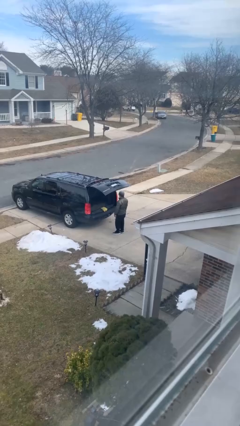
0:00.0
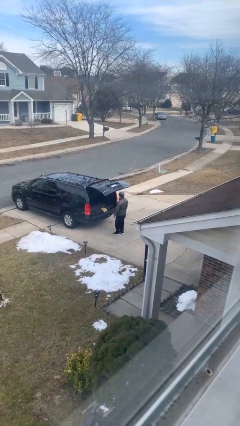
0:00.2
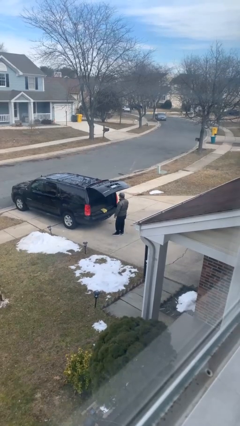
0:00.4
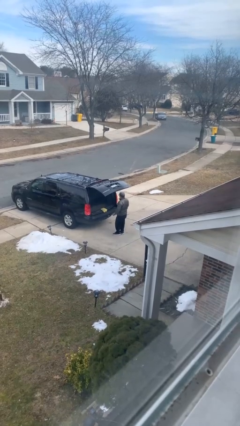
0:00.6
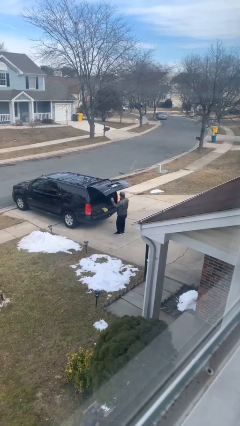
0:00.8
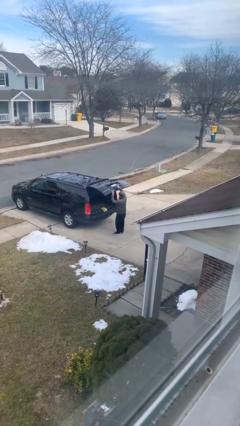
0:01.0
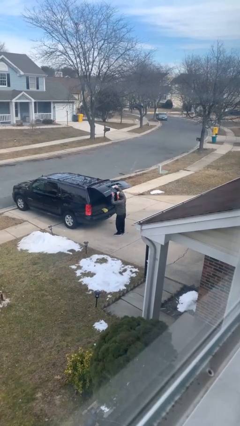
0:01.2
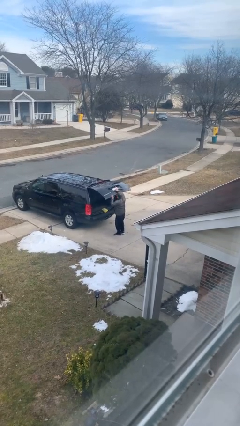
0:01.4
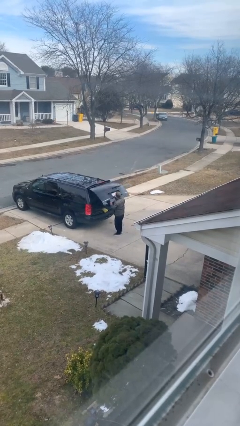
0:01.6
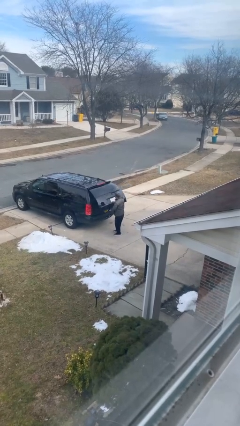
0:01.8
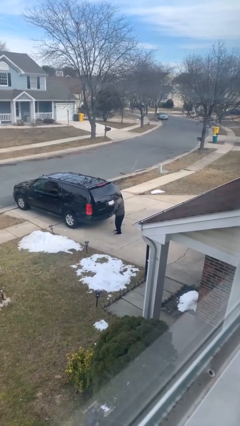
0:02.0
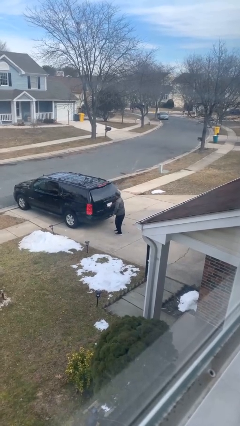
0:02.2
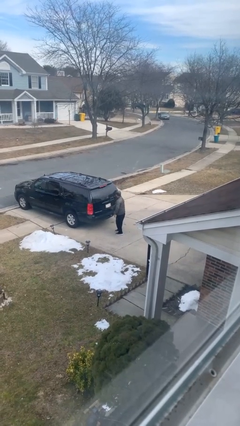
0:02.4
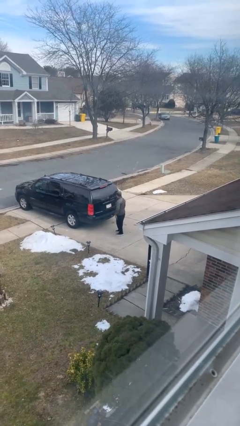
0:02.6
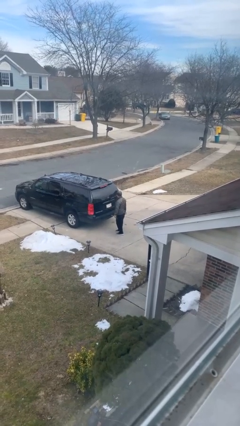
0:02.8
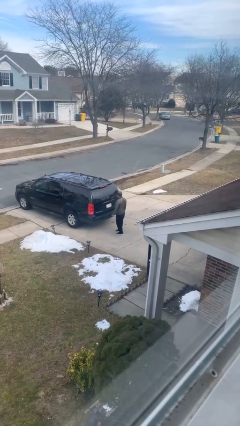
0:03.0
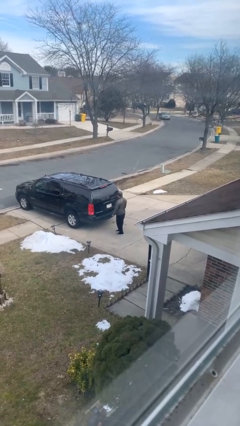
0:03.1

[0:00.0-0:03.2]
person closes car trunk

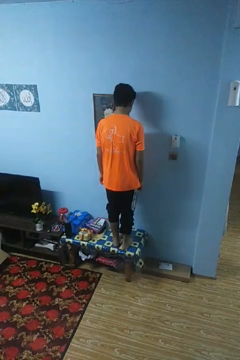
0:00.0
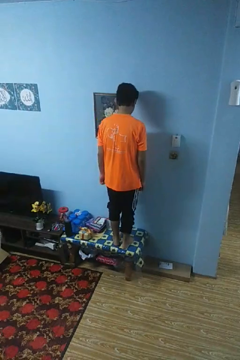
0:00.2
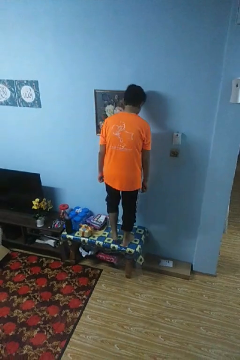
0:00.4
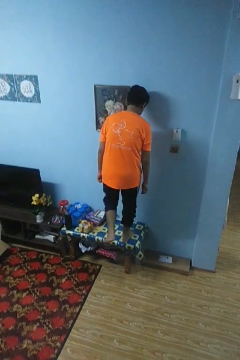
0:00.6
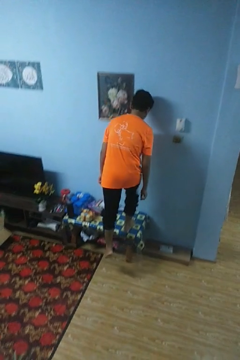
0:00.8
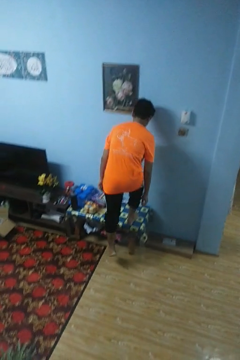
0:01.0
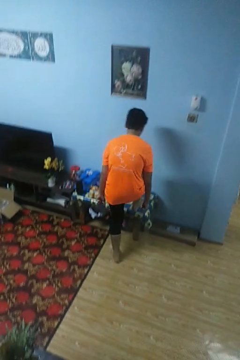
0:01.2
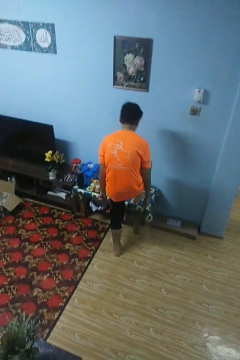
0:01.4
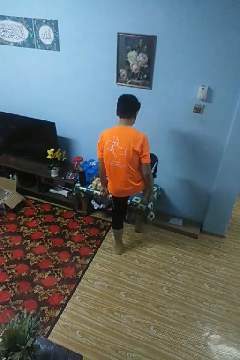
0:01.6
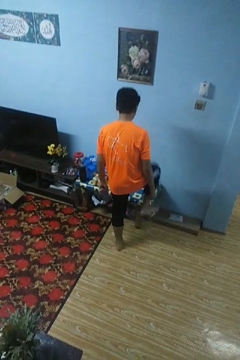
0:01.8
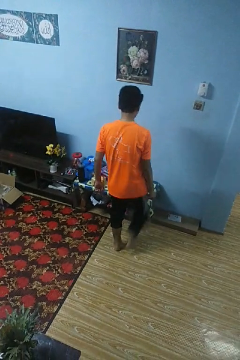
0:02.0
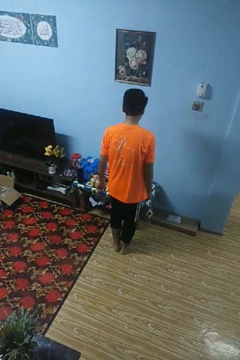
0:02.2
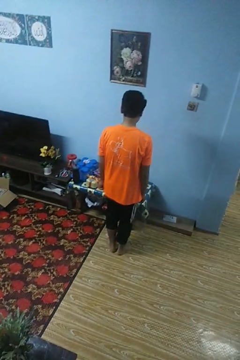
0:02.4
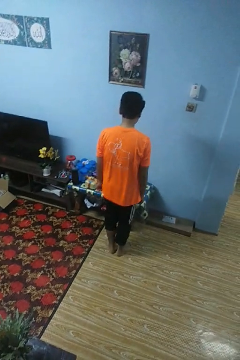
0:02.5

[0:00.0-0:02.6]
person climbs off table

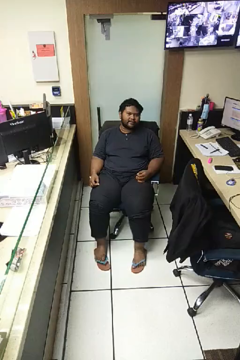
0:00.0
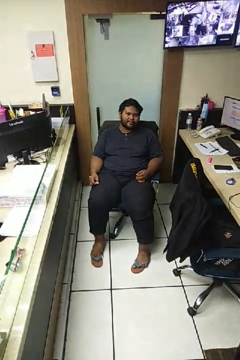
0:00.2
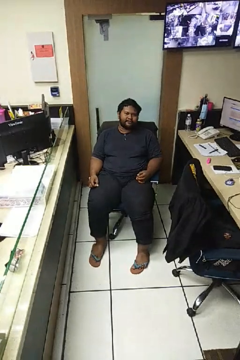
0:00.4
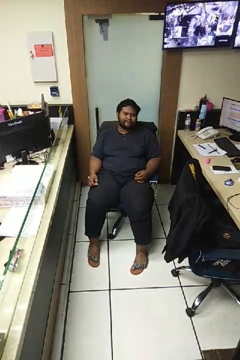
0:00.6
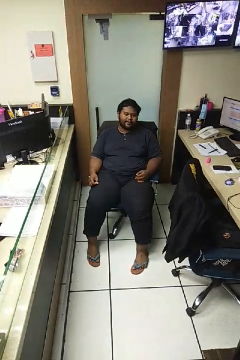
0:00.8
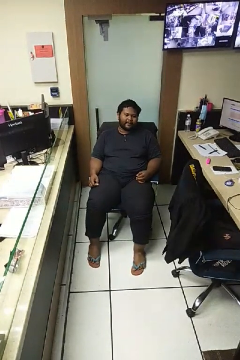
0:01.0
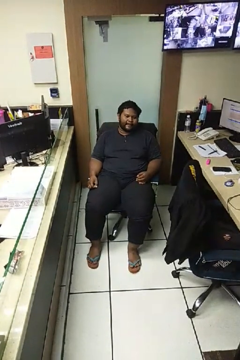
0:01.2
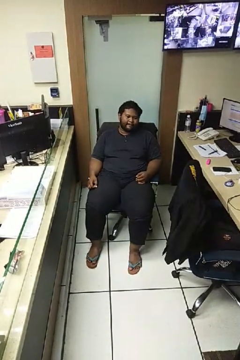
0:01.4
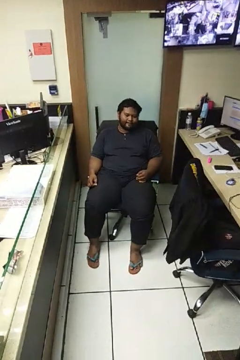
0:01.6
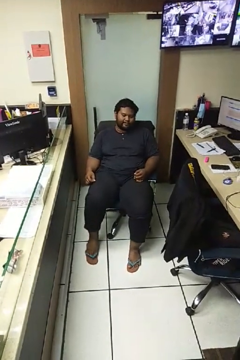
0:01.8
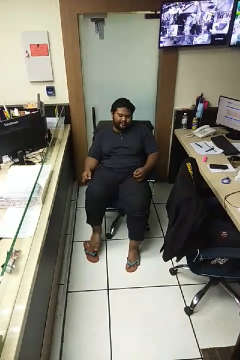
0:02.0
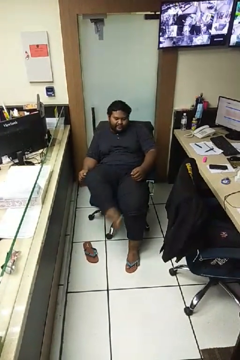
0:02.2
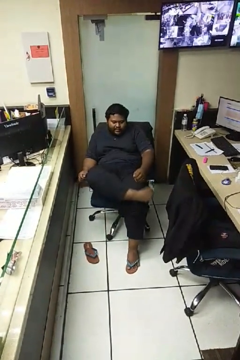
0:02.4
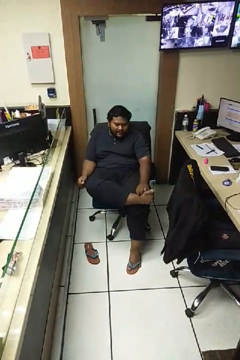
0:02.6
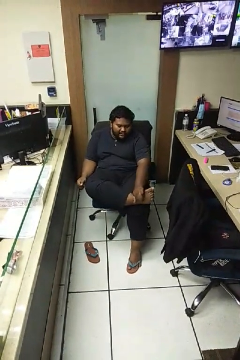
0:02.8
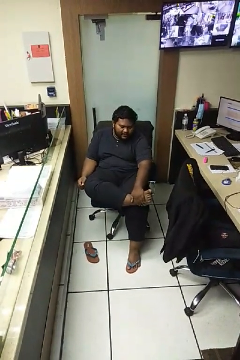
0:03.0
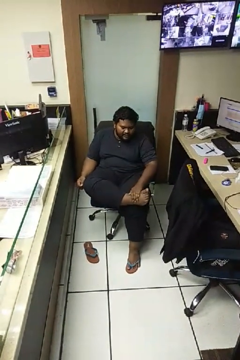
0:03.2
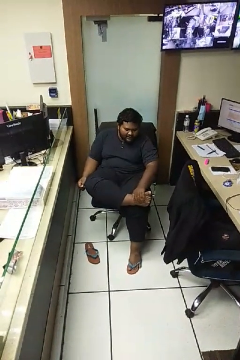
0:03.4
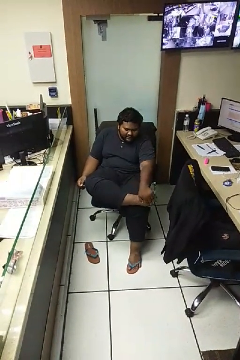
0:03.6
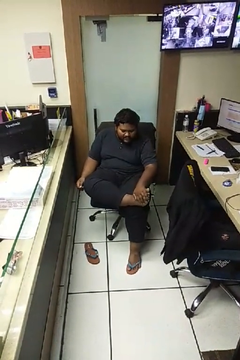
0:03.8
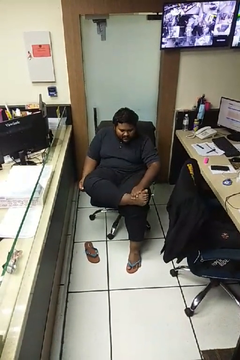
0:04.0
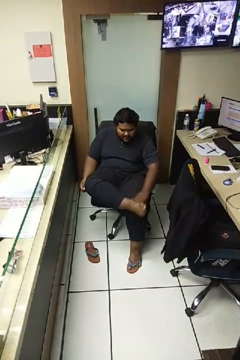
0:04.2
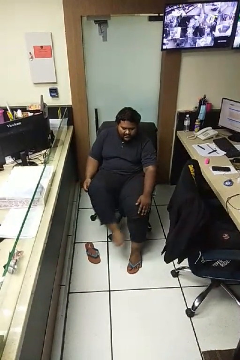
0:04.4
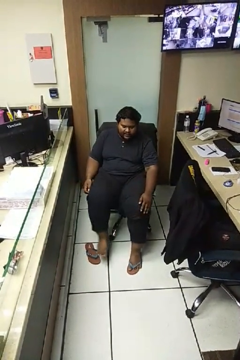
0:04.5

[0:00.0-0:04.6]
person rubs foot

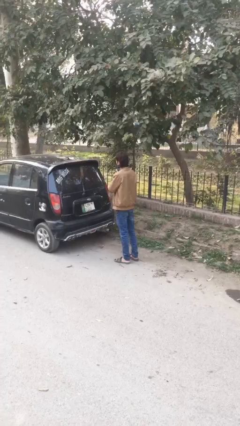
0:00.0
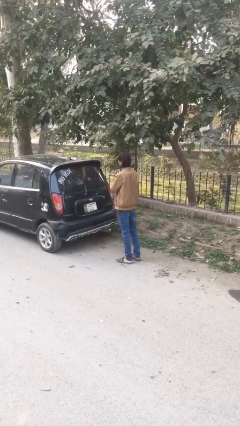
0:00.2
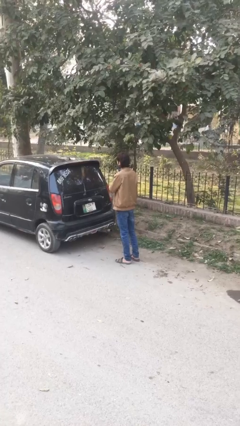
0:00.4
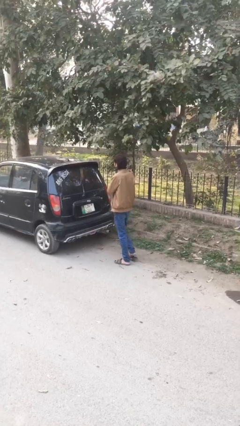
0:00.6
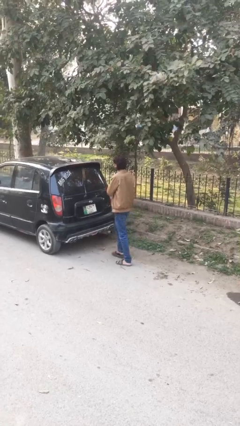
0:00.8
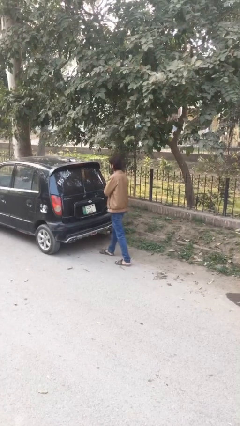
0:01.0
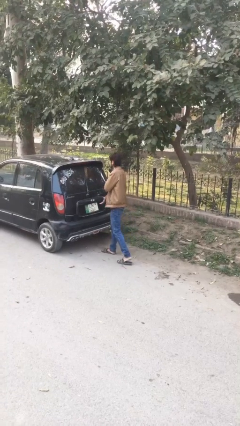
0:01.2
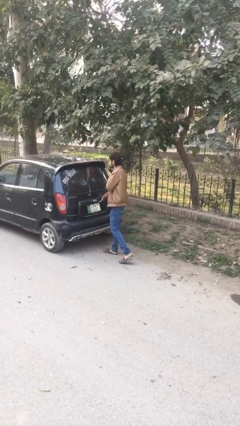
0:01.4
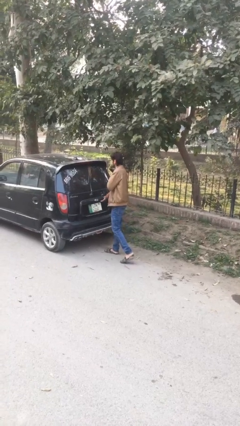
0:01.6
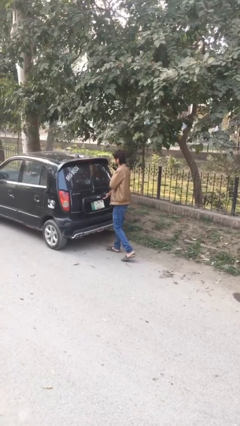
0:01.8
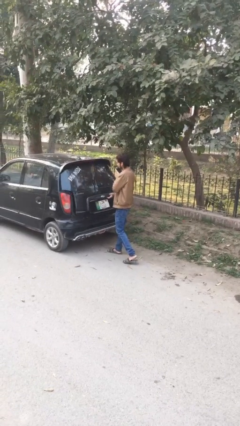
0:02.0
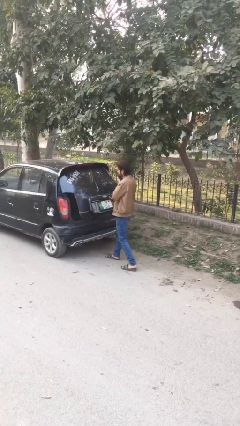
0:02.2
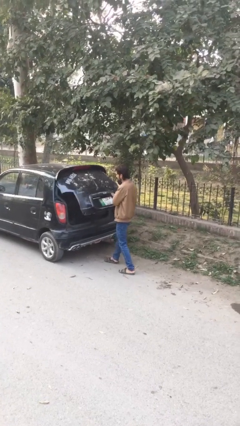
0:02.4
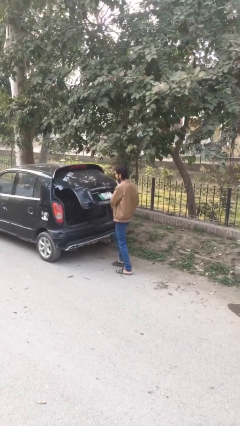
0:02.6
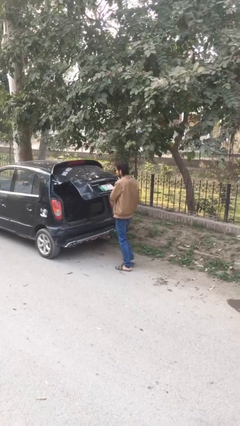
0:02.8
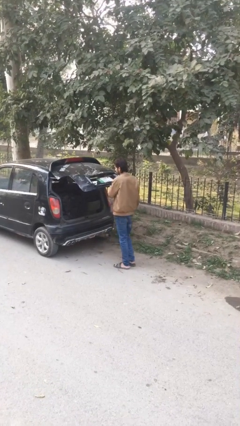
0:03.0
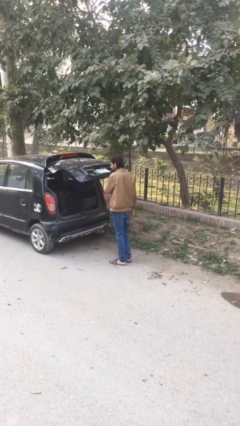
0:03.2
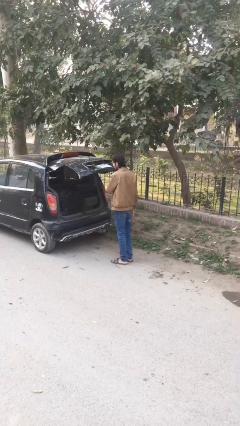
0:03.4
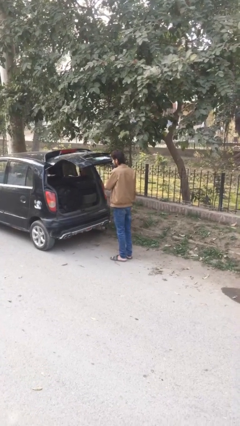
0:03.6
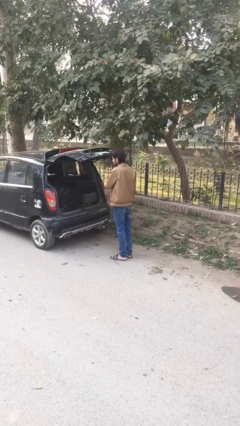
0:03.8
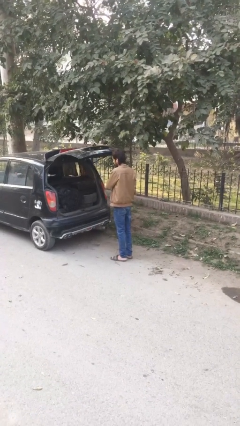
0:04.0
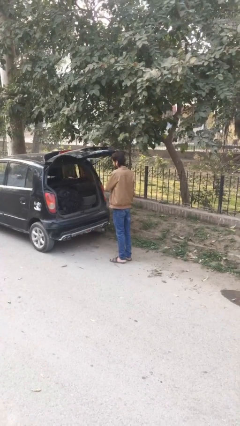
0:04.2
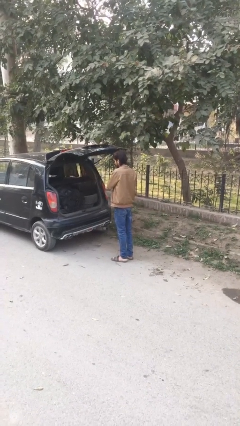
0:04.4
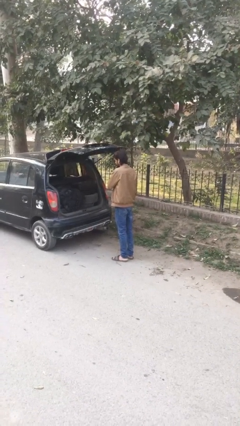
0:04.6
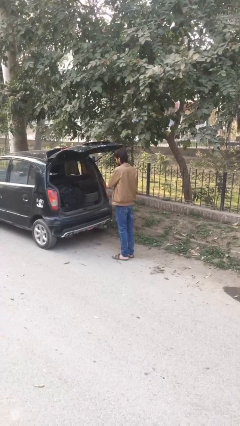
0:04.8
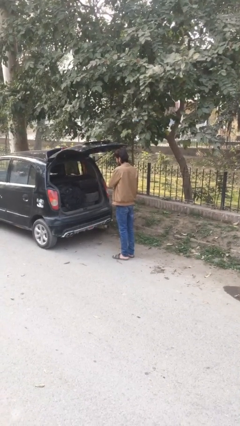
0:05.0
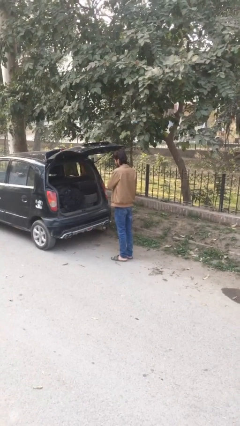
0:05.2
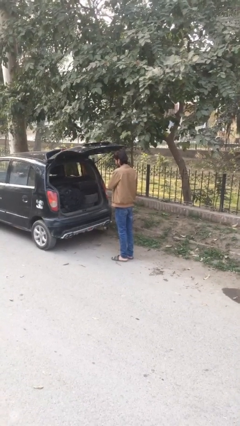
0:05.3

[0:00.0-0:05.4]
person opens car trunk

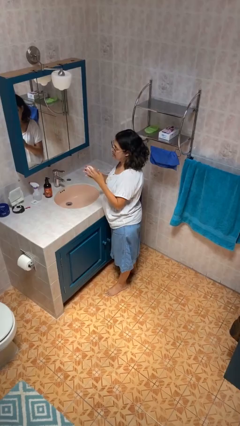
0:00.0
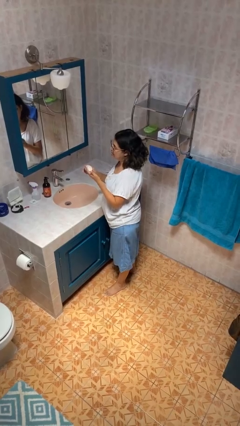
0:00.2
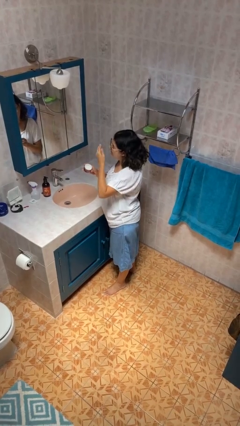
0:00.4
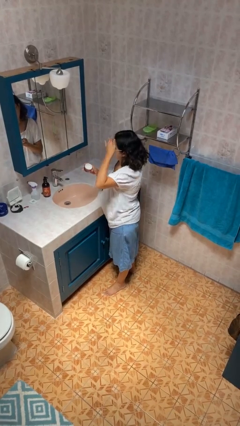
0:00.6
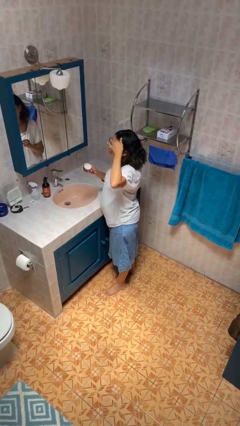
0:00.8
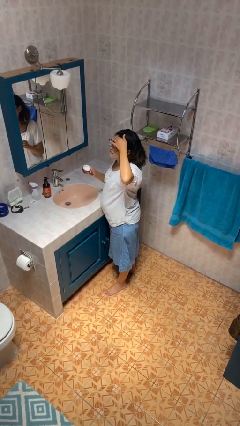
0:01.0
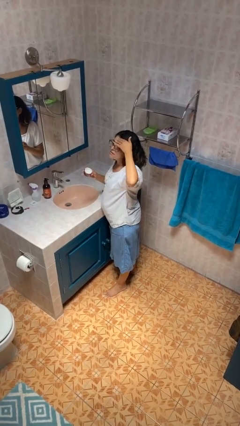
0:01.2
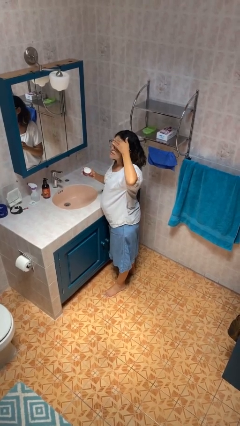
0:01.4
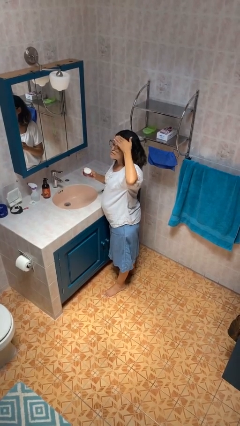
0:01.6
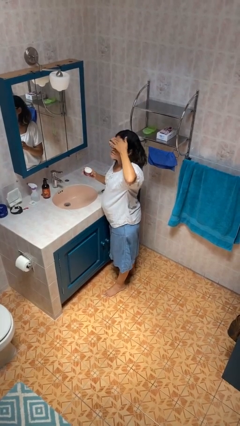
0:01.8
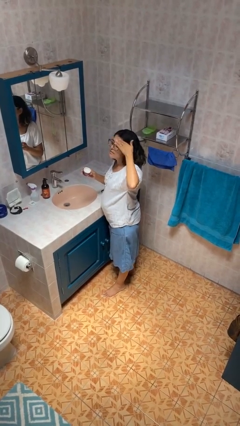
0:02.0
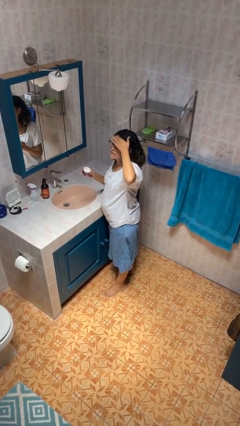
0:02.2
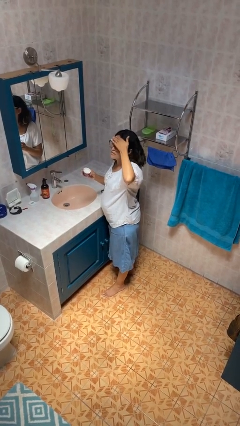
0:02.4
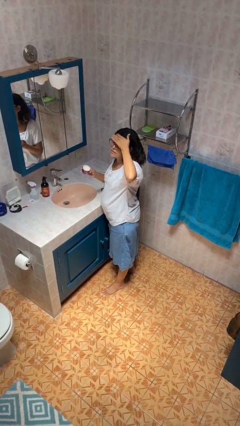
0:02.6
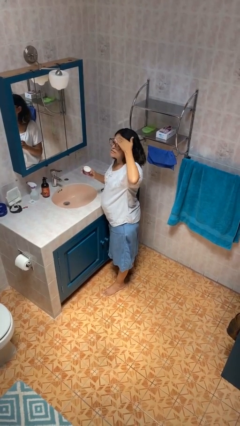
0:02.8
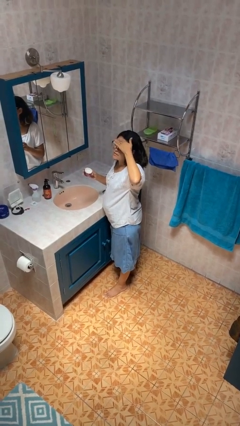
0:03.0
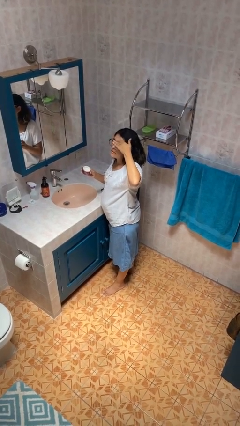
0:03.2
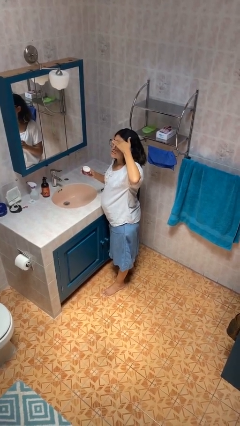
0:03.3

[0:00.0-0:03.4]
person applies facial moisturizer
